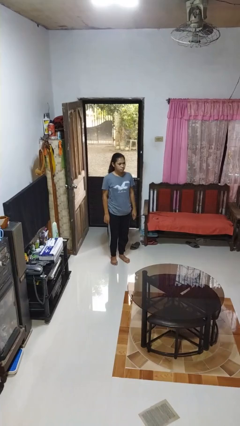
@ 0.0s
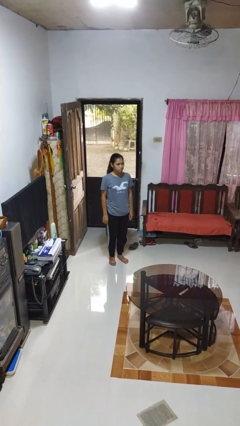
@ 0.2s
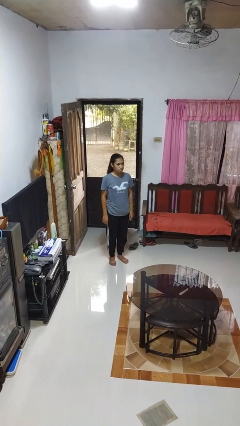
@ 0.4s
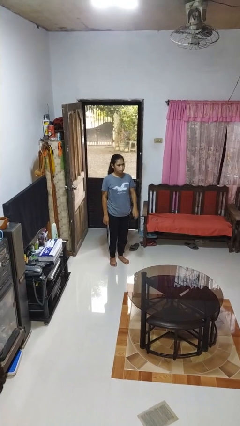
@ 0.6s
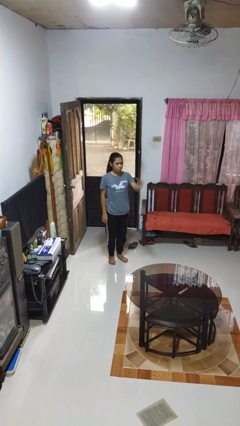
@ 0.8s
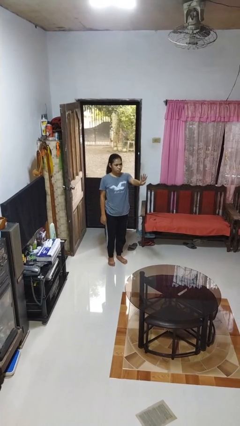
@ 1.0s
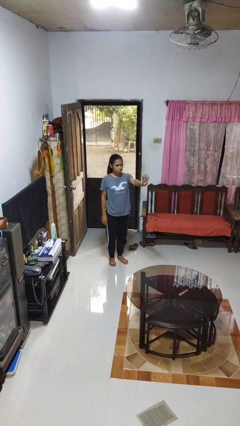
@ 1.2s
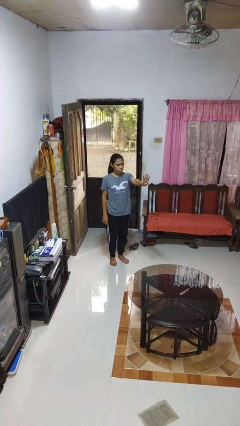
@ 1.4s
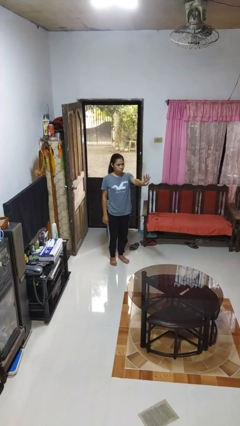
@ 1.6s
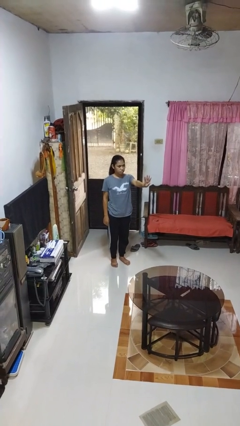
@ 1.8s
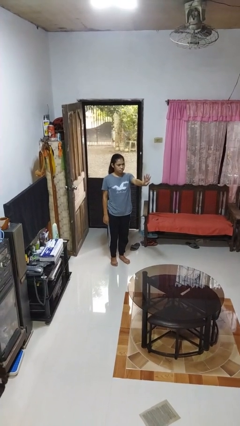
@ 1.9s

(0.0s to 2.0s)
person gestures number four

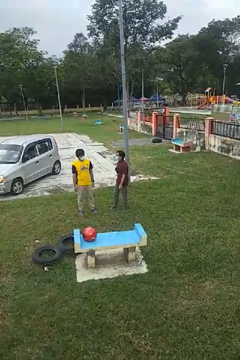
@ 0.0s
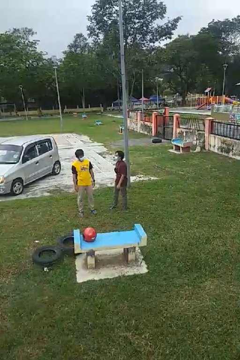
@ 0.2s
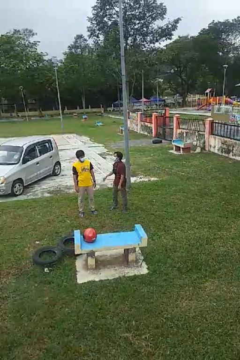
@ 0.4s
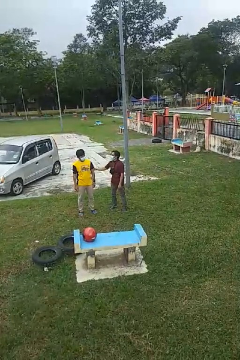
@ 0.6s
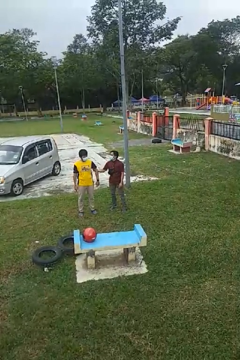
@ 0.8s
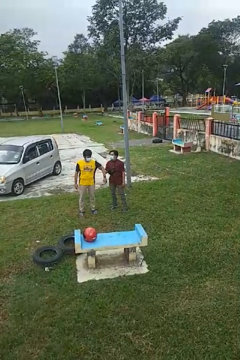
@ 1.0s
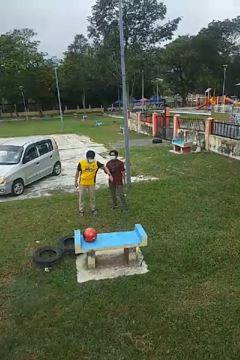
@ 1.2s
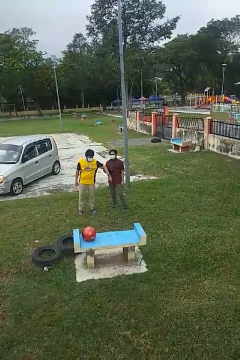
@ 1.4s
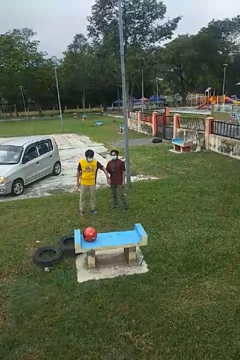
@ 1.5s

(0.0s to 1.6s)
person grabs person by bicep

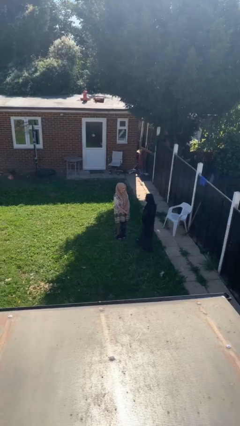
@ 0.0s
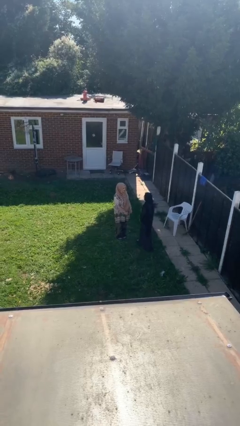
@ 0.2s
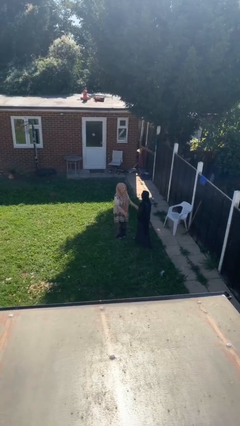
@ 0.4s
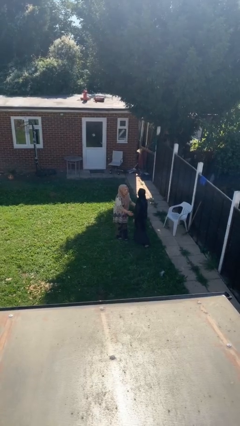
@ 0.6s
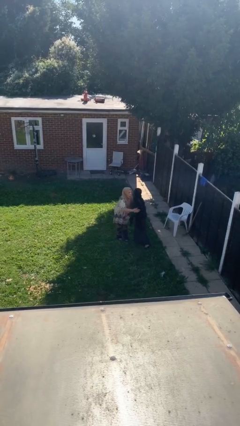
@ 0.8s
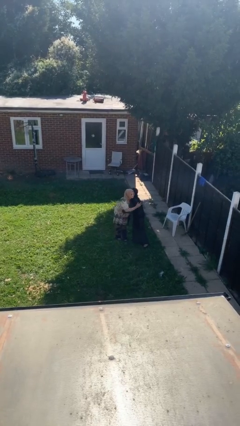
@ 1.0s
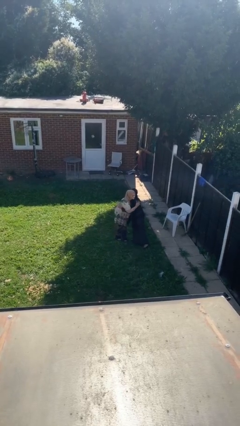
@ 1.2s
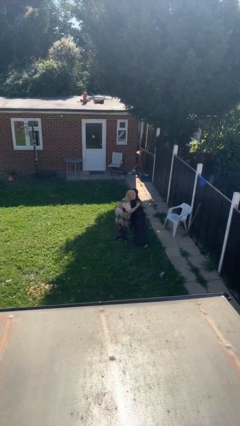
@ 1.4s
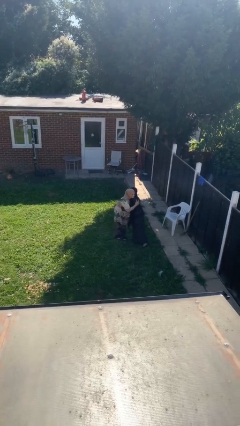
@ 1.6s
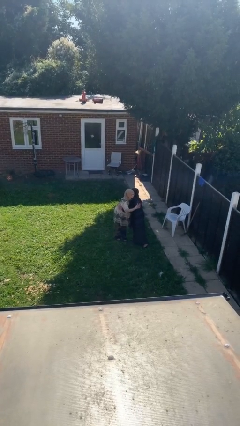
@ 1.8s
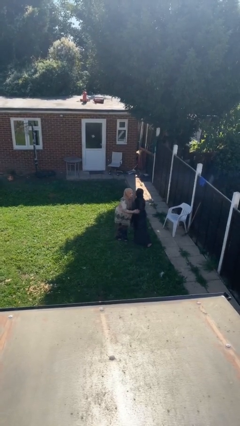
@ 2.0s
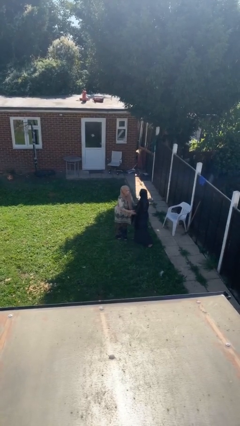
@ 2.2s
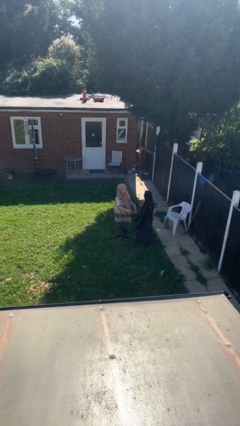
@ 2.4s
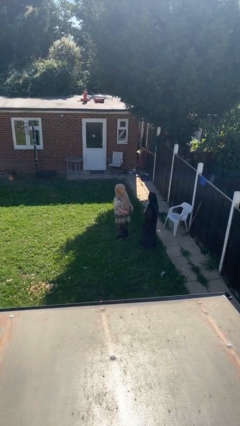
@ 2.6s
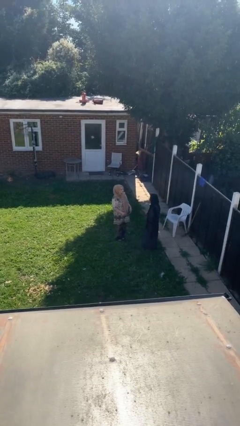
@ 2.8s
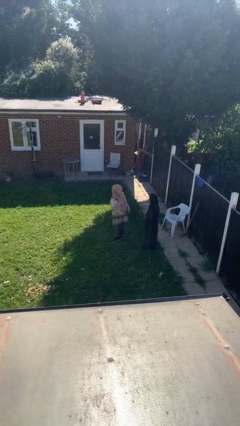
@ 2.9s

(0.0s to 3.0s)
person embraces person

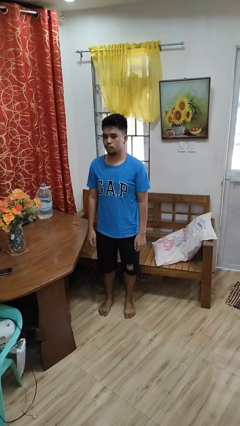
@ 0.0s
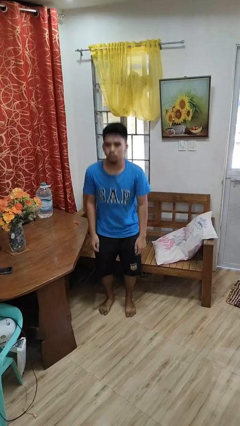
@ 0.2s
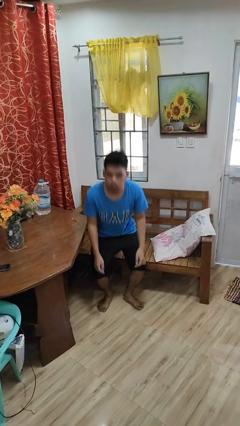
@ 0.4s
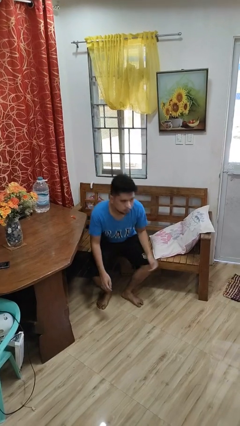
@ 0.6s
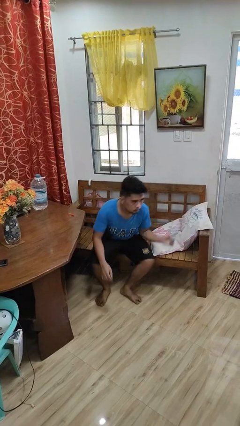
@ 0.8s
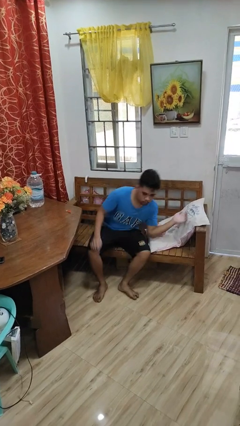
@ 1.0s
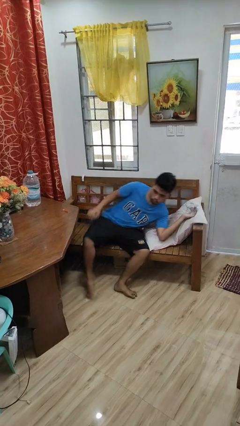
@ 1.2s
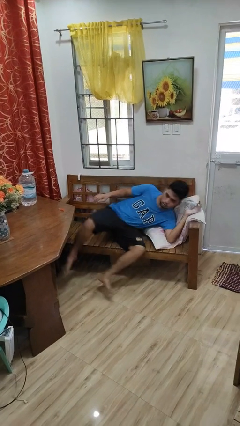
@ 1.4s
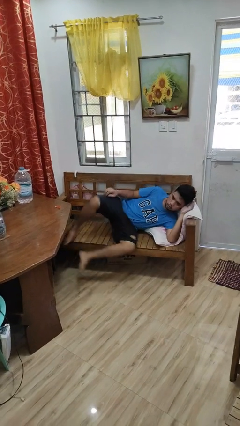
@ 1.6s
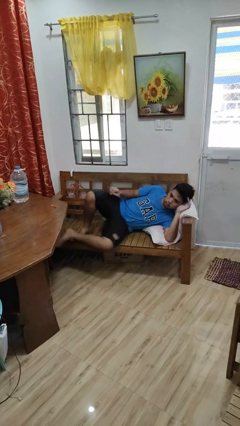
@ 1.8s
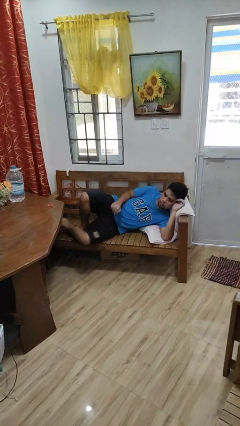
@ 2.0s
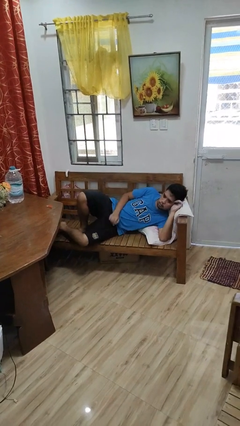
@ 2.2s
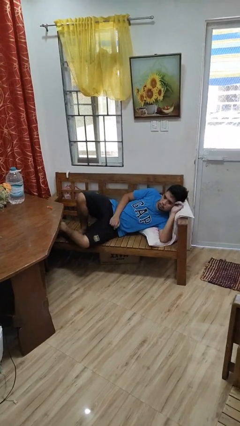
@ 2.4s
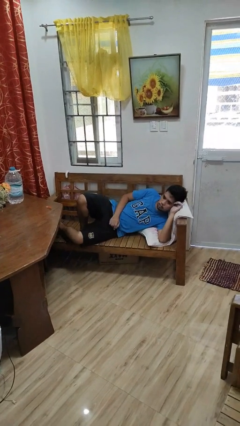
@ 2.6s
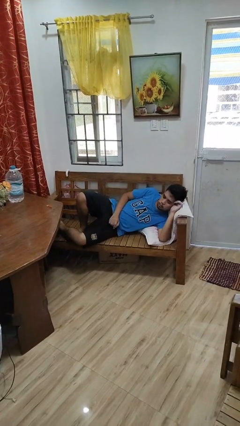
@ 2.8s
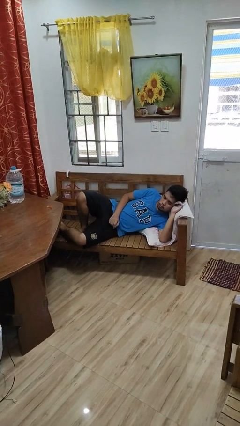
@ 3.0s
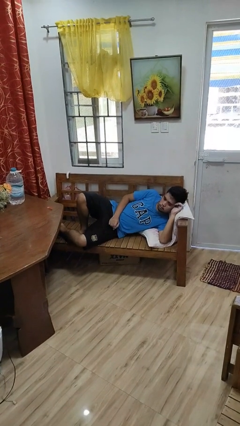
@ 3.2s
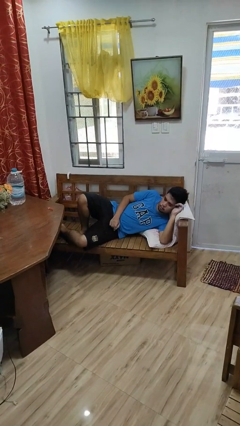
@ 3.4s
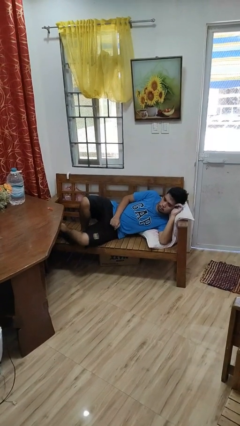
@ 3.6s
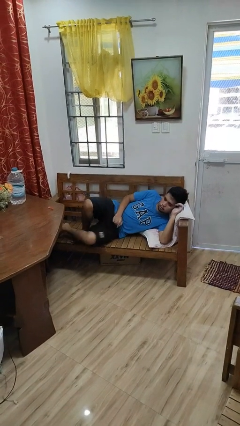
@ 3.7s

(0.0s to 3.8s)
person lies down on couch

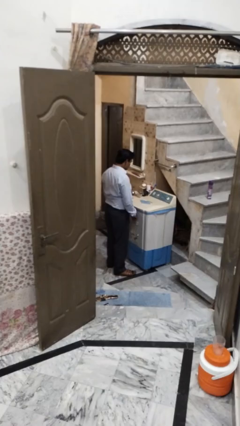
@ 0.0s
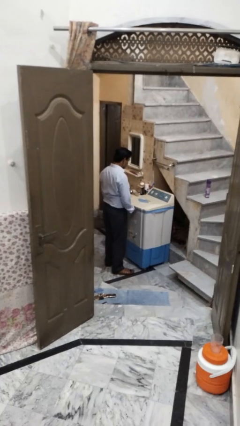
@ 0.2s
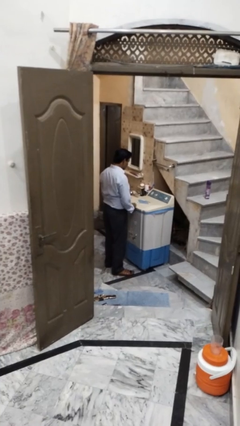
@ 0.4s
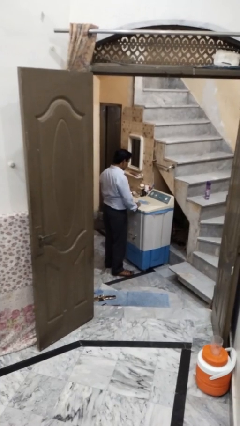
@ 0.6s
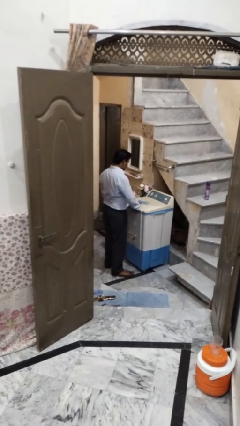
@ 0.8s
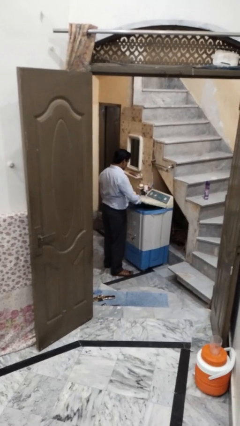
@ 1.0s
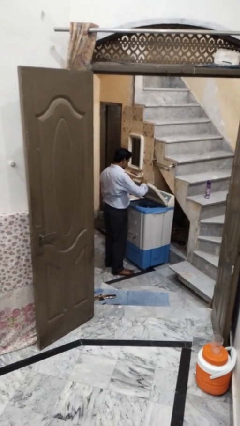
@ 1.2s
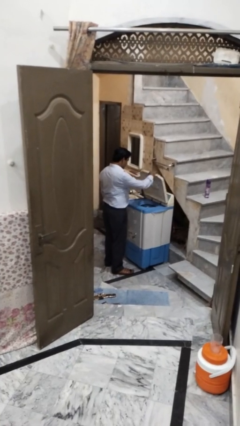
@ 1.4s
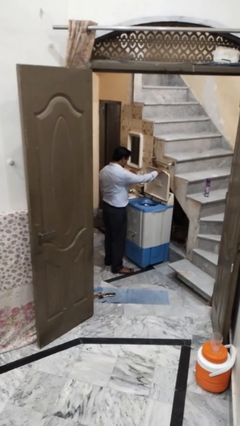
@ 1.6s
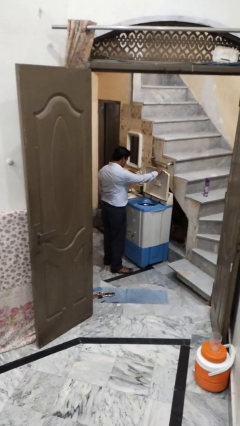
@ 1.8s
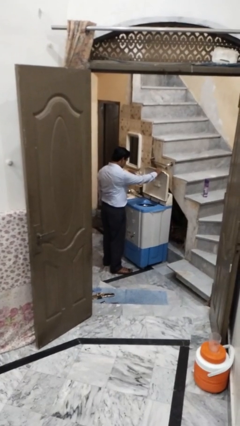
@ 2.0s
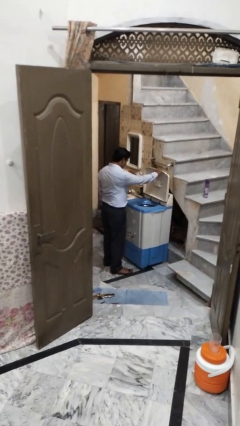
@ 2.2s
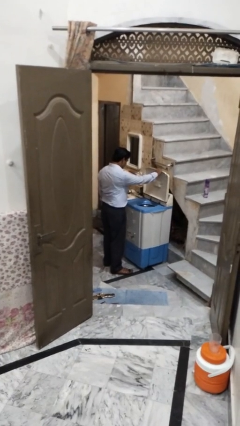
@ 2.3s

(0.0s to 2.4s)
person opens clothes washer

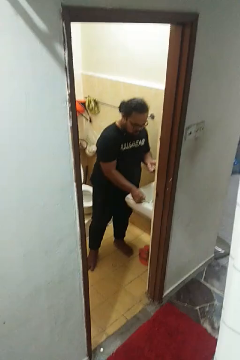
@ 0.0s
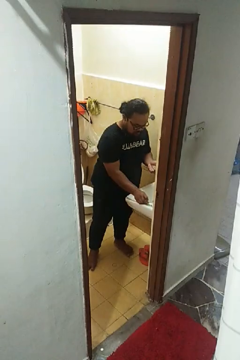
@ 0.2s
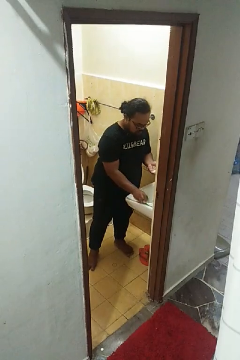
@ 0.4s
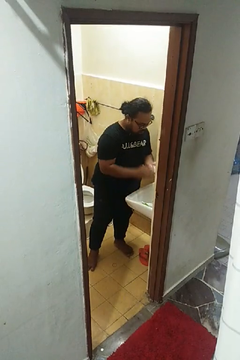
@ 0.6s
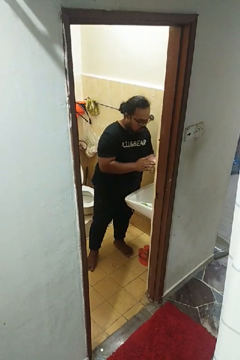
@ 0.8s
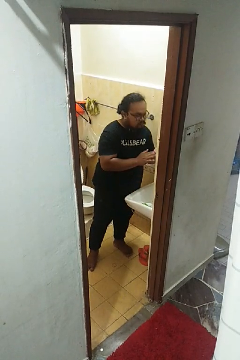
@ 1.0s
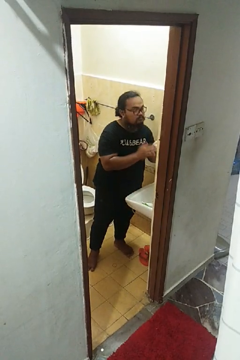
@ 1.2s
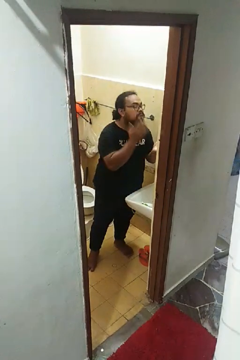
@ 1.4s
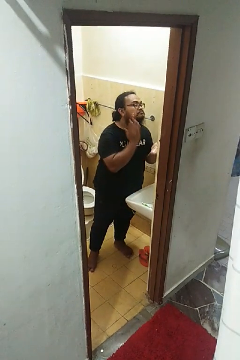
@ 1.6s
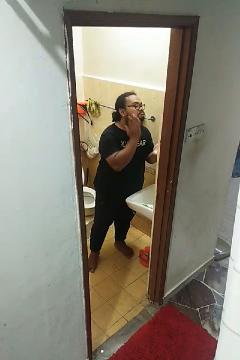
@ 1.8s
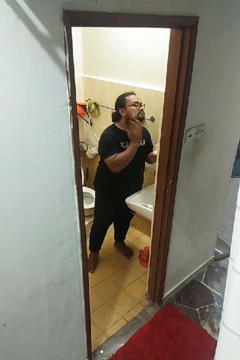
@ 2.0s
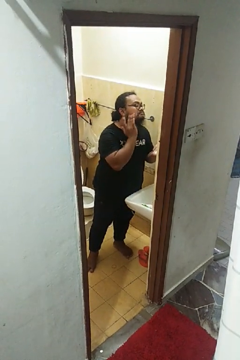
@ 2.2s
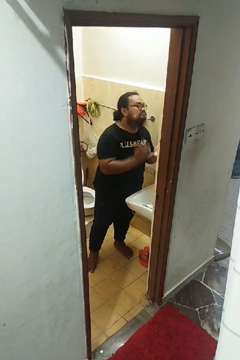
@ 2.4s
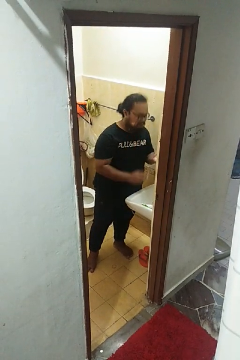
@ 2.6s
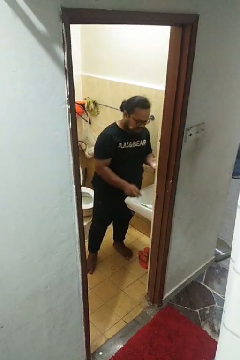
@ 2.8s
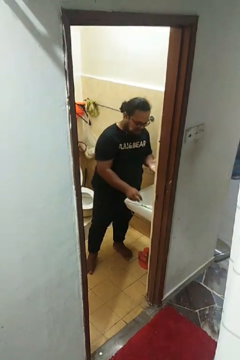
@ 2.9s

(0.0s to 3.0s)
person applies shaving cream

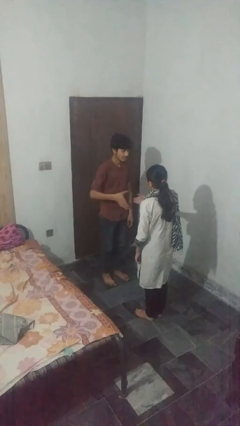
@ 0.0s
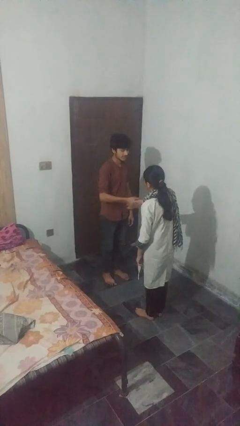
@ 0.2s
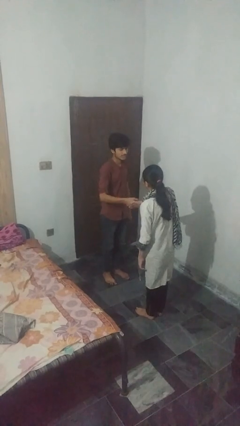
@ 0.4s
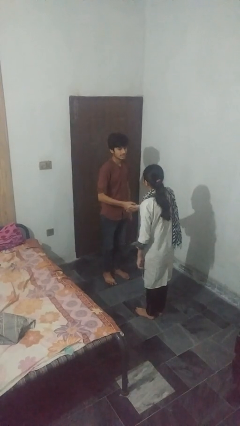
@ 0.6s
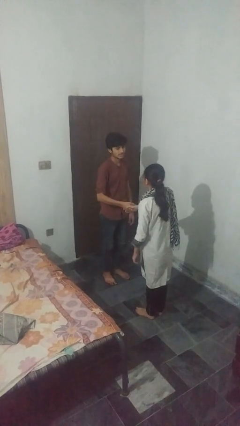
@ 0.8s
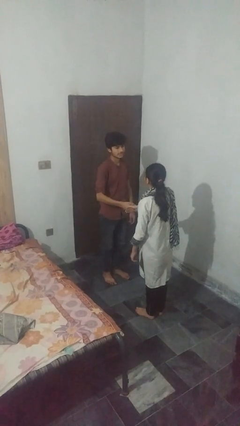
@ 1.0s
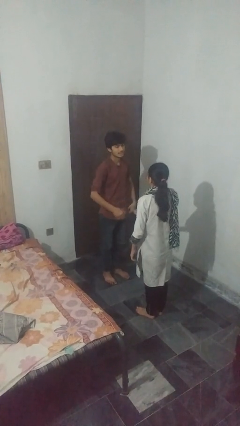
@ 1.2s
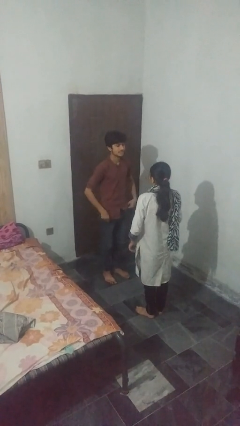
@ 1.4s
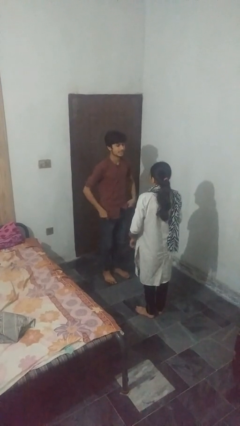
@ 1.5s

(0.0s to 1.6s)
person highfives hand

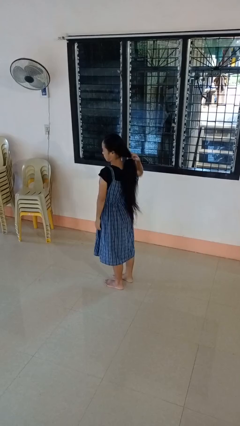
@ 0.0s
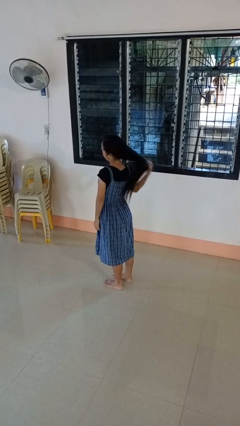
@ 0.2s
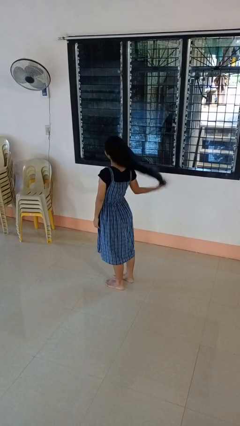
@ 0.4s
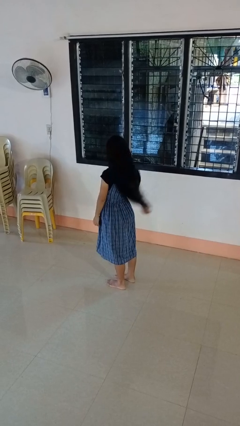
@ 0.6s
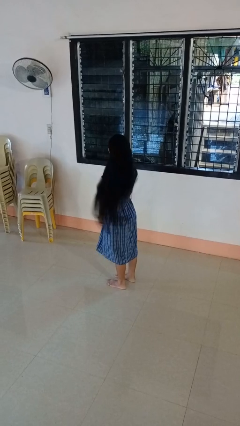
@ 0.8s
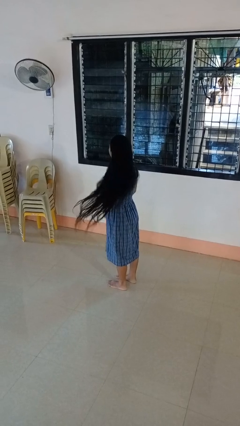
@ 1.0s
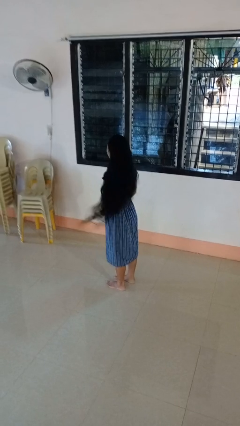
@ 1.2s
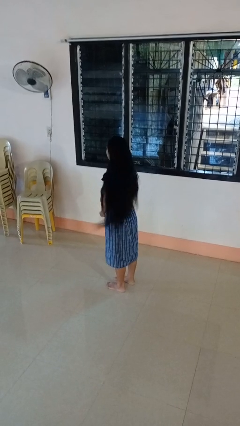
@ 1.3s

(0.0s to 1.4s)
person takes off hairtie
